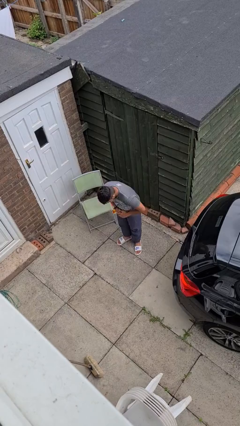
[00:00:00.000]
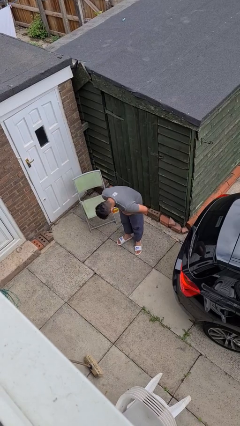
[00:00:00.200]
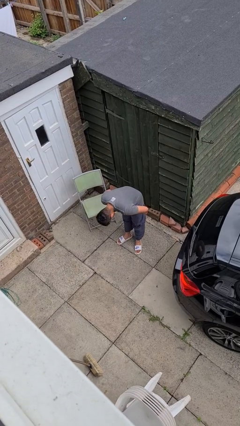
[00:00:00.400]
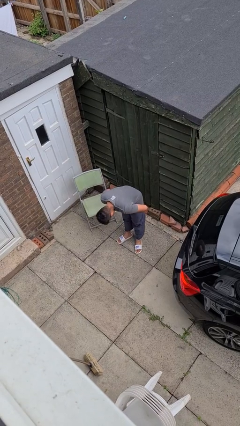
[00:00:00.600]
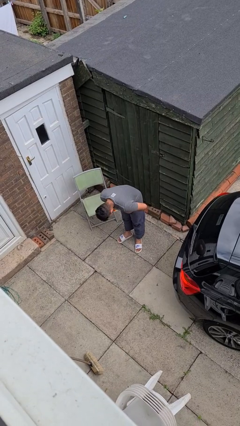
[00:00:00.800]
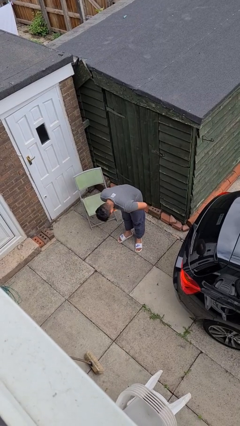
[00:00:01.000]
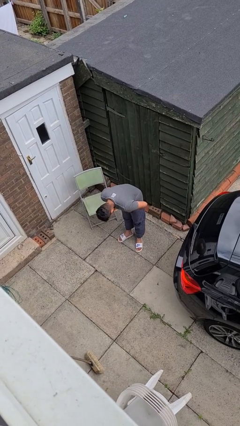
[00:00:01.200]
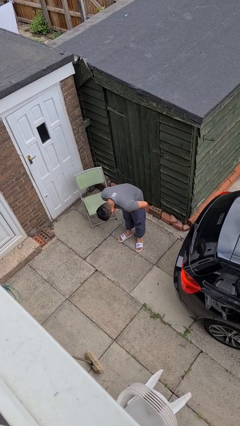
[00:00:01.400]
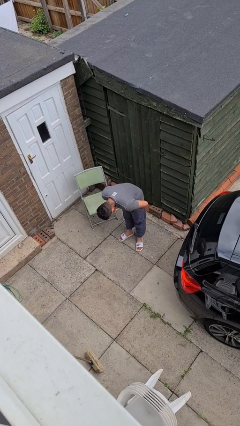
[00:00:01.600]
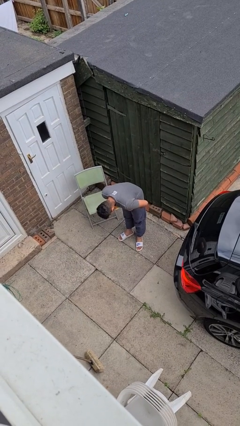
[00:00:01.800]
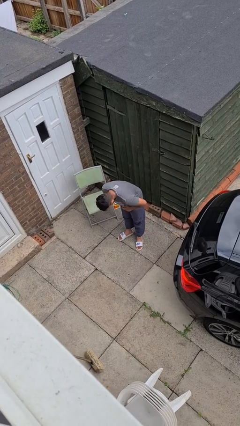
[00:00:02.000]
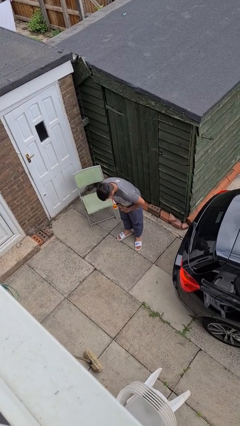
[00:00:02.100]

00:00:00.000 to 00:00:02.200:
person bows

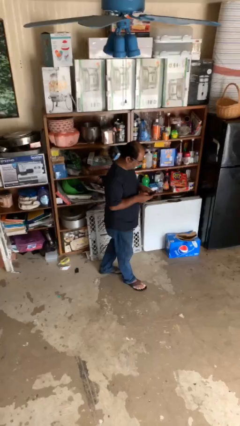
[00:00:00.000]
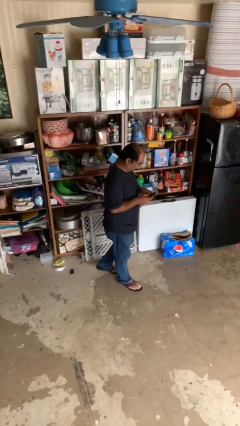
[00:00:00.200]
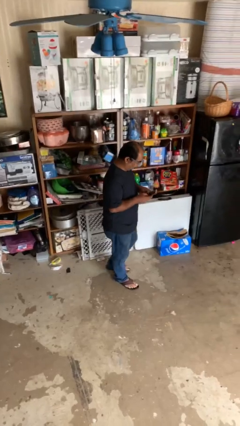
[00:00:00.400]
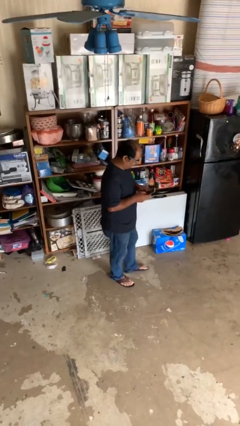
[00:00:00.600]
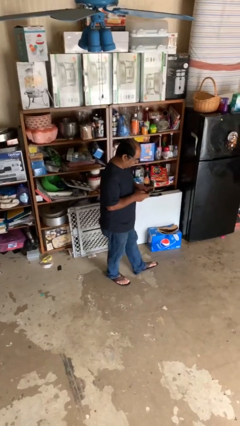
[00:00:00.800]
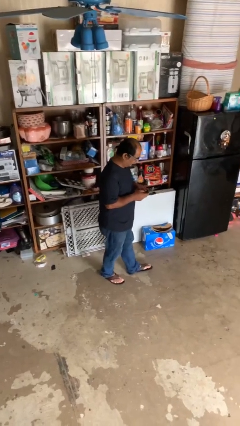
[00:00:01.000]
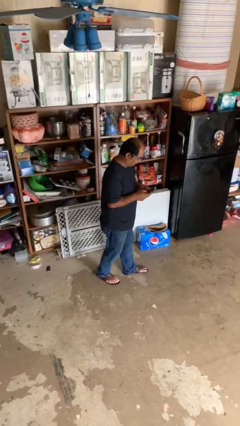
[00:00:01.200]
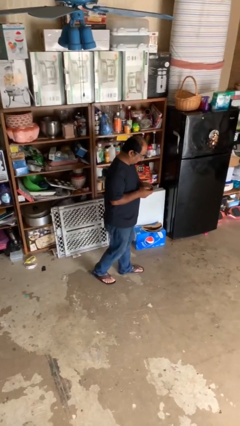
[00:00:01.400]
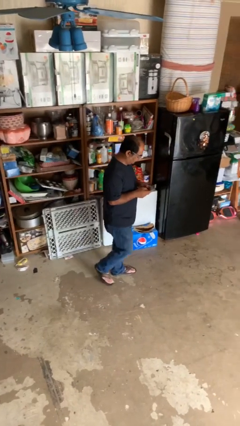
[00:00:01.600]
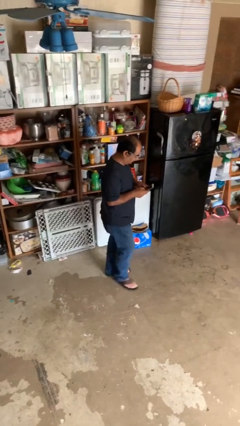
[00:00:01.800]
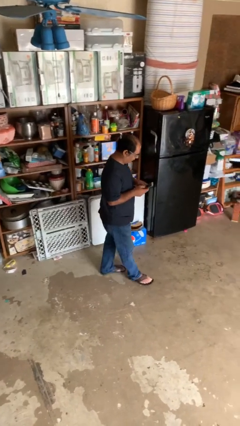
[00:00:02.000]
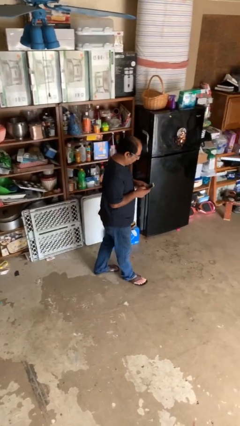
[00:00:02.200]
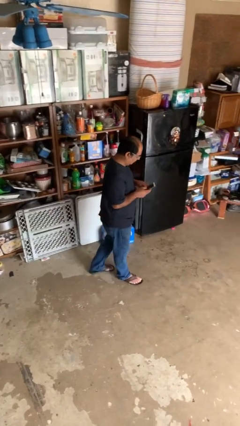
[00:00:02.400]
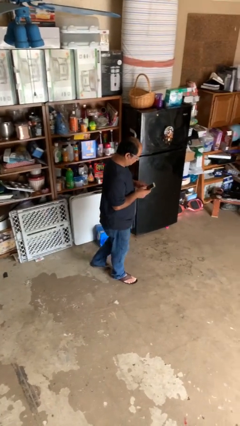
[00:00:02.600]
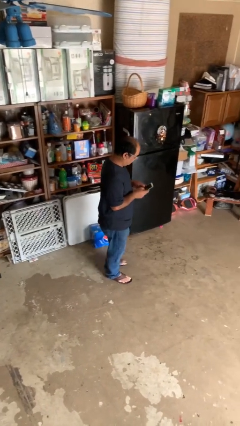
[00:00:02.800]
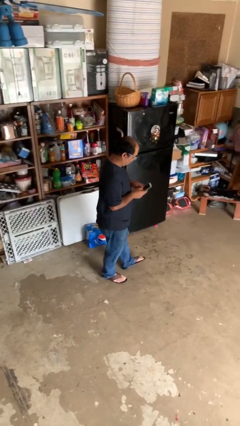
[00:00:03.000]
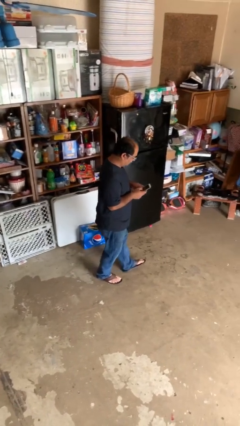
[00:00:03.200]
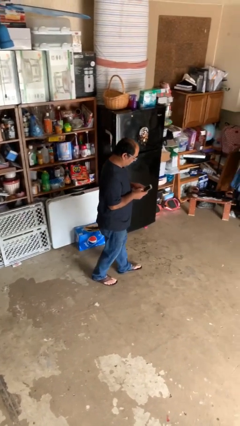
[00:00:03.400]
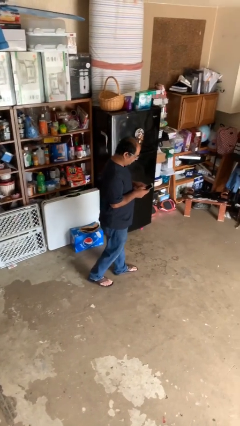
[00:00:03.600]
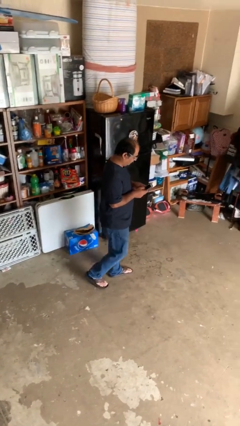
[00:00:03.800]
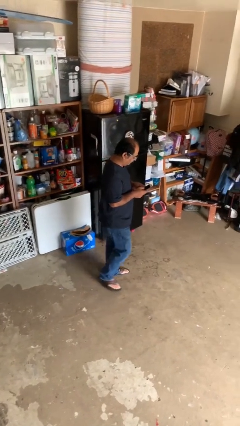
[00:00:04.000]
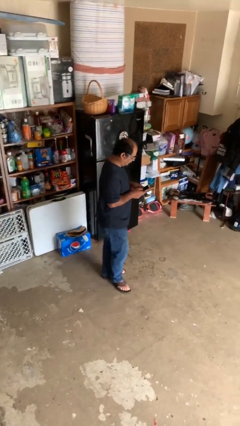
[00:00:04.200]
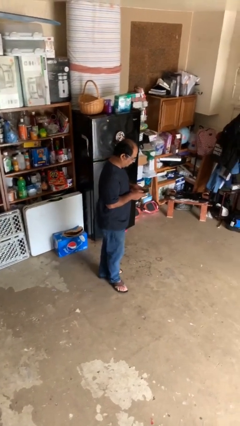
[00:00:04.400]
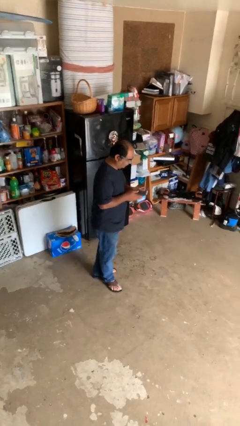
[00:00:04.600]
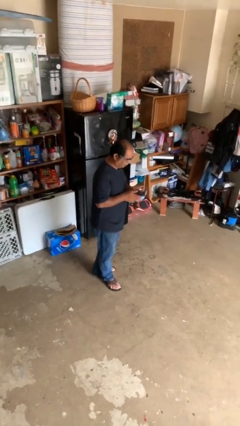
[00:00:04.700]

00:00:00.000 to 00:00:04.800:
person texts on phone

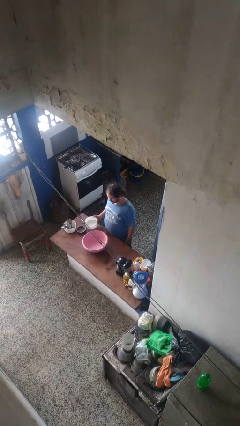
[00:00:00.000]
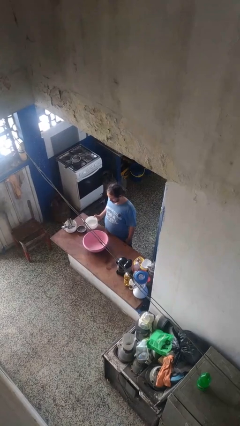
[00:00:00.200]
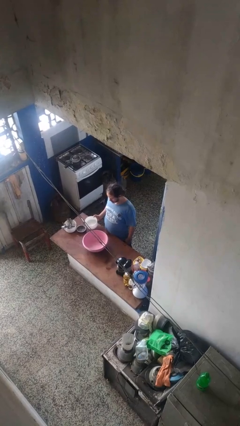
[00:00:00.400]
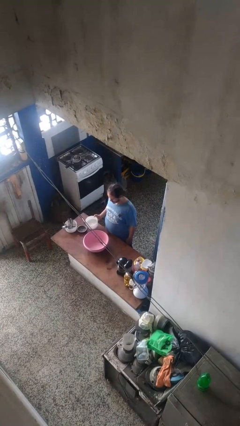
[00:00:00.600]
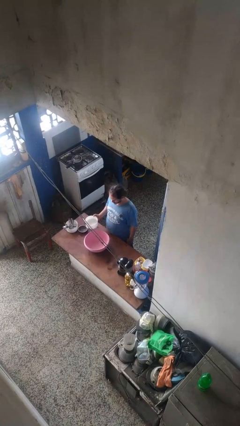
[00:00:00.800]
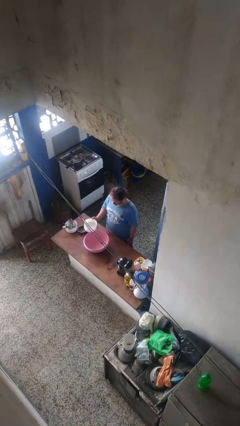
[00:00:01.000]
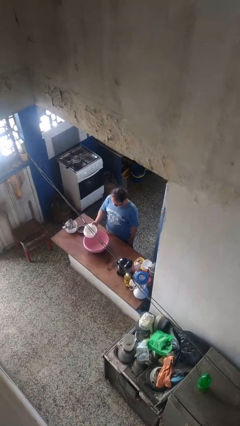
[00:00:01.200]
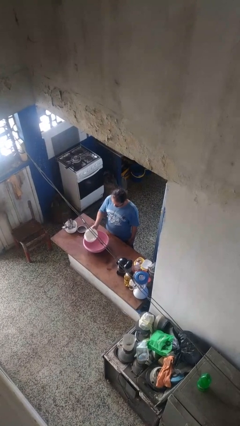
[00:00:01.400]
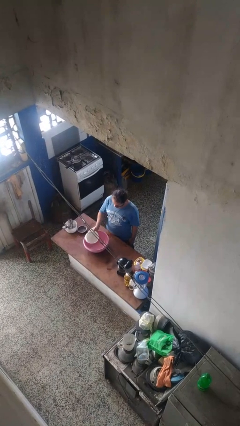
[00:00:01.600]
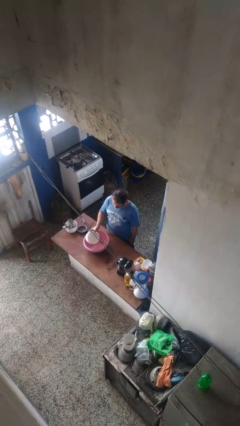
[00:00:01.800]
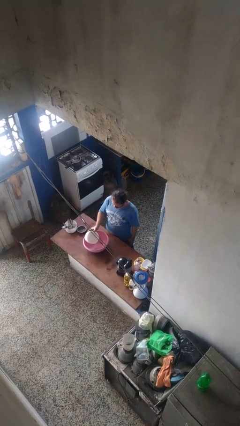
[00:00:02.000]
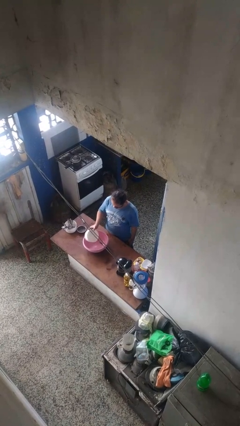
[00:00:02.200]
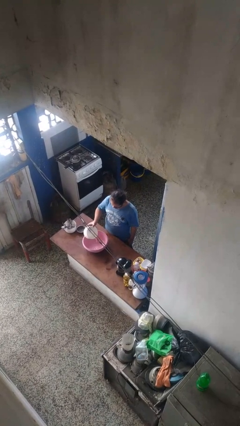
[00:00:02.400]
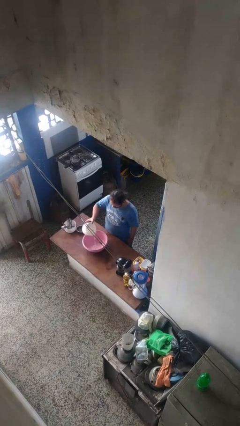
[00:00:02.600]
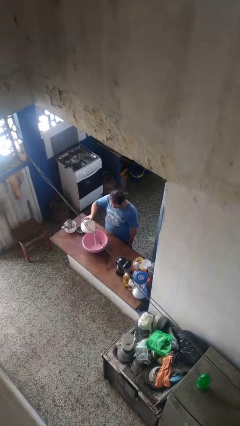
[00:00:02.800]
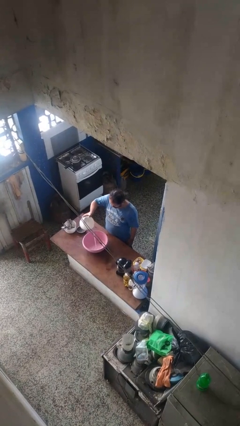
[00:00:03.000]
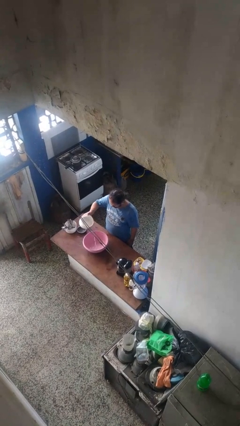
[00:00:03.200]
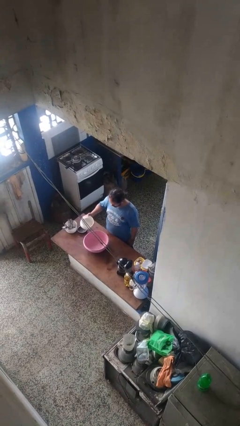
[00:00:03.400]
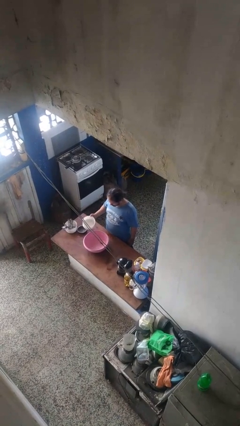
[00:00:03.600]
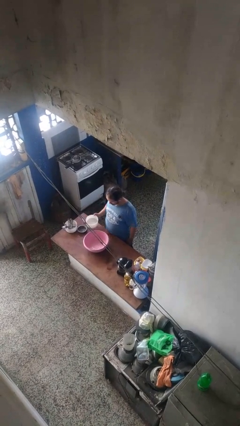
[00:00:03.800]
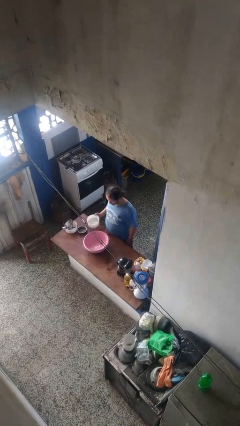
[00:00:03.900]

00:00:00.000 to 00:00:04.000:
person pours into bowl

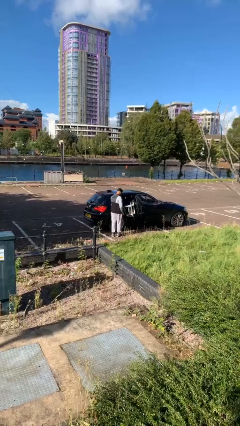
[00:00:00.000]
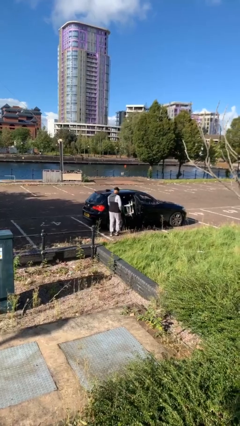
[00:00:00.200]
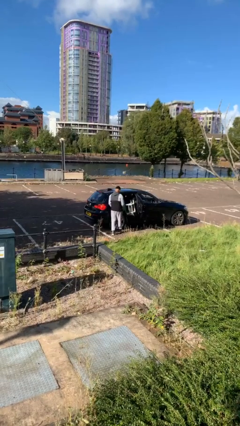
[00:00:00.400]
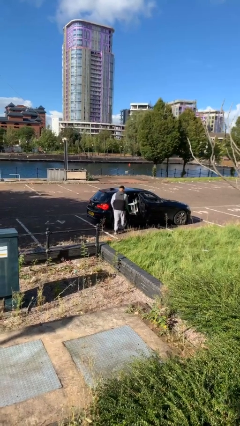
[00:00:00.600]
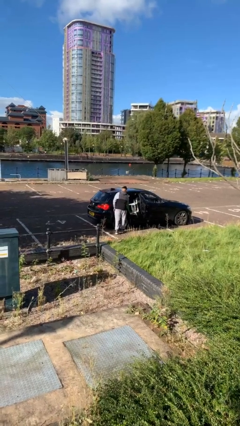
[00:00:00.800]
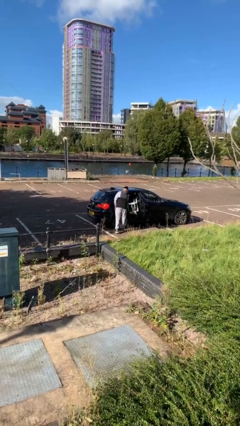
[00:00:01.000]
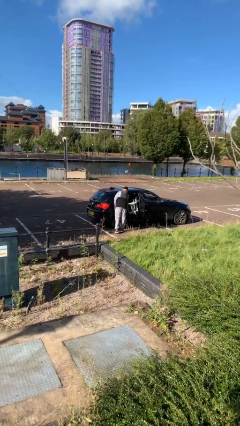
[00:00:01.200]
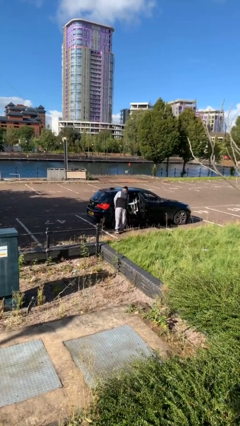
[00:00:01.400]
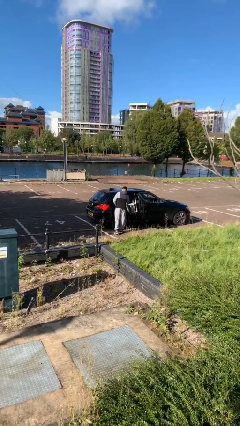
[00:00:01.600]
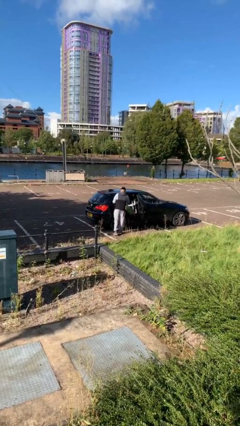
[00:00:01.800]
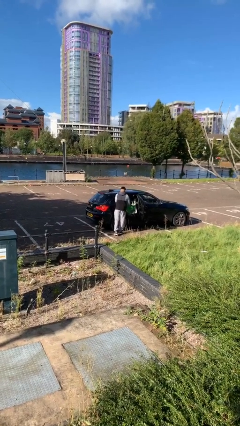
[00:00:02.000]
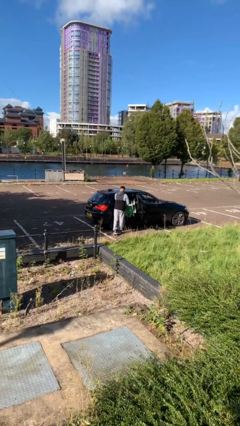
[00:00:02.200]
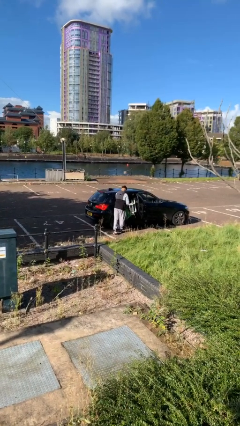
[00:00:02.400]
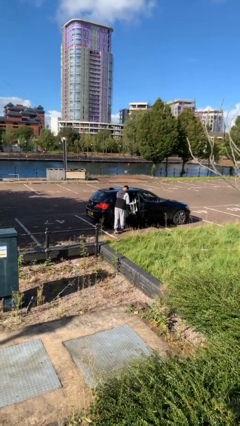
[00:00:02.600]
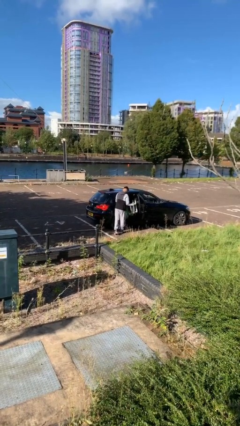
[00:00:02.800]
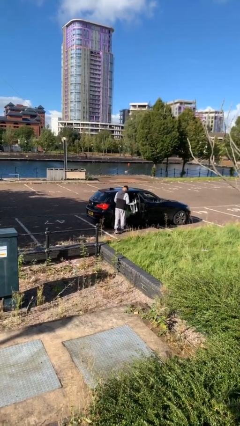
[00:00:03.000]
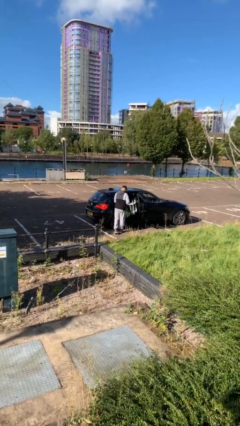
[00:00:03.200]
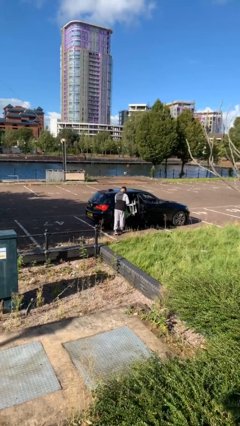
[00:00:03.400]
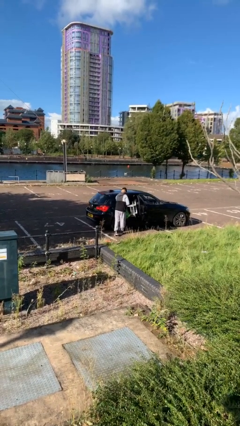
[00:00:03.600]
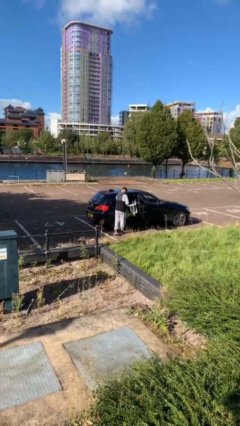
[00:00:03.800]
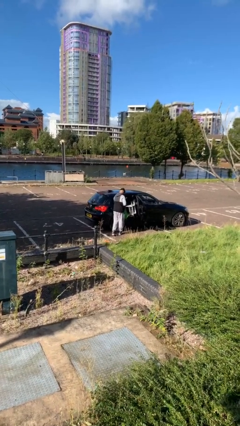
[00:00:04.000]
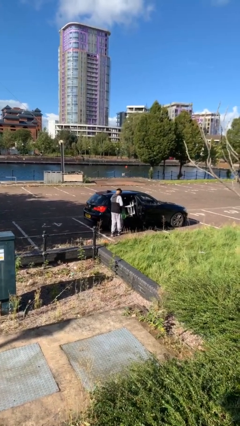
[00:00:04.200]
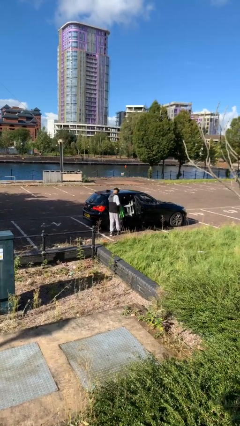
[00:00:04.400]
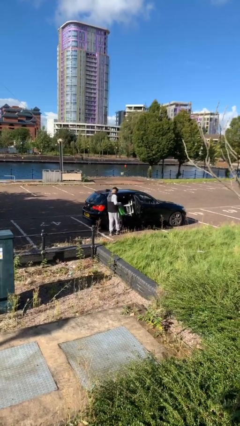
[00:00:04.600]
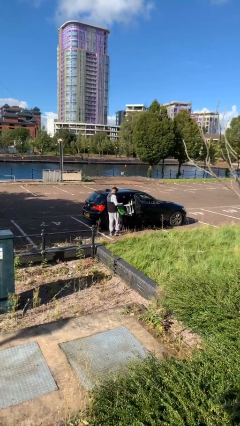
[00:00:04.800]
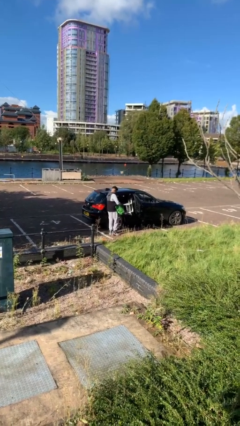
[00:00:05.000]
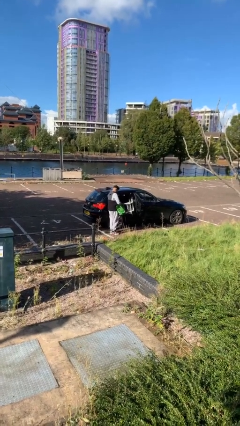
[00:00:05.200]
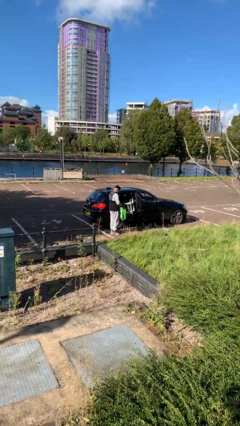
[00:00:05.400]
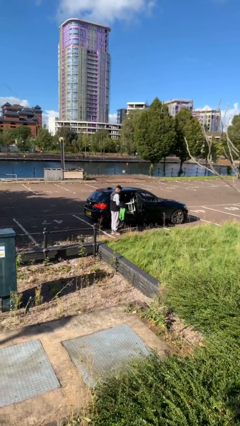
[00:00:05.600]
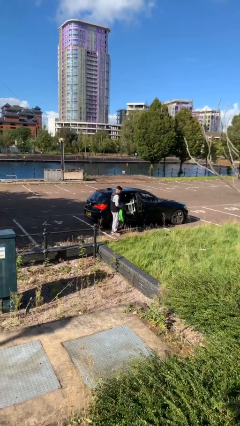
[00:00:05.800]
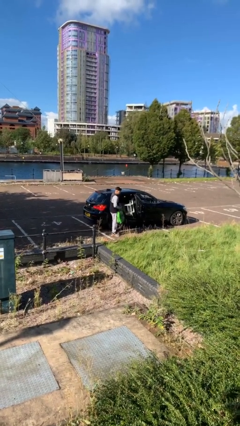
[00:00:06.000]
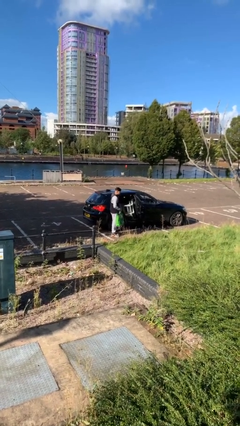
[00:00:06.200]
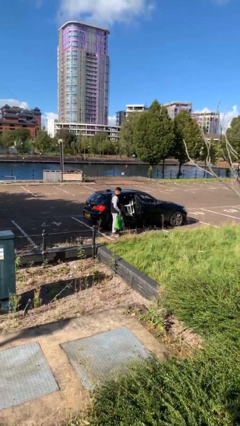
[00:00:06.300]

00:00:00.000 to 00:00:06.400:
person unloads car
